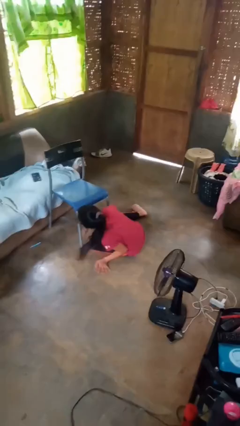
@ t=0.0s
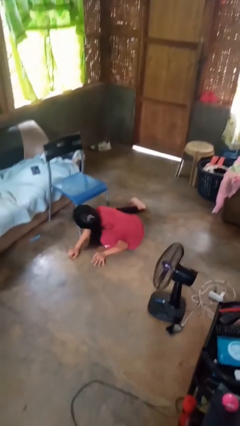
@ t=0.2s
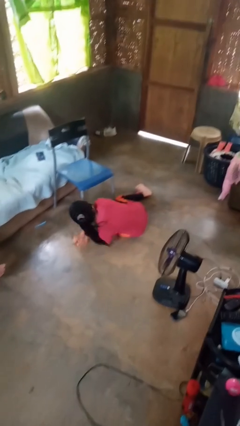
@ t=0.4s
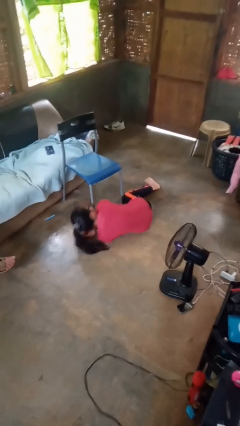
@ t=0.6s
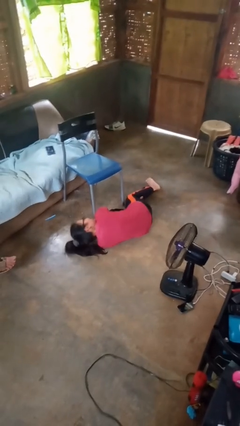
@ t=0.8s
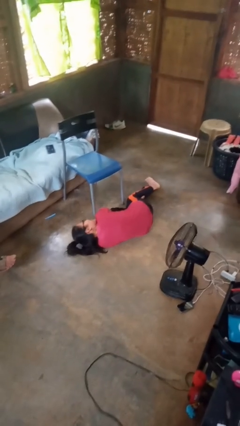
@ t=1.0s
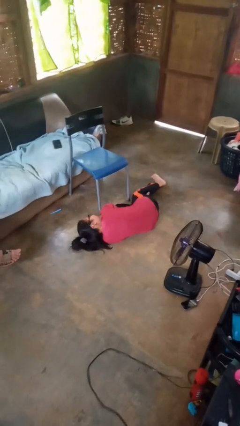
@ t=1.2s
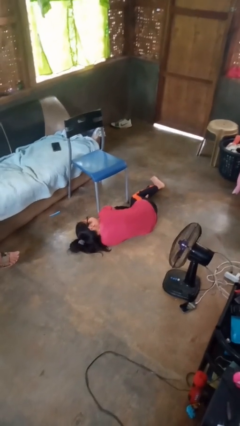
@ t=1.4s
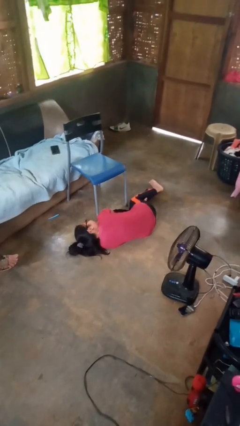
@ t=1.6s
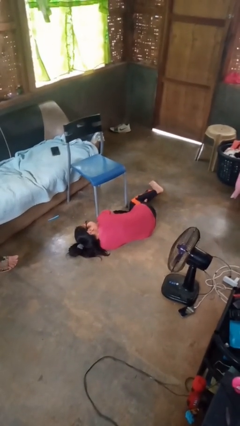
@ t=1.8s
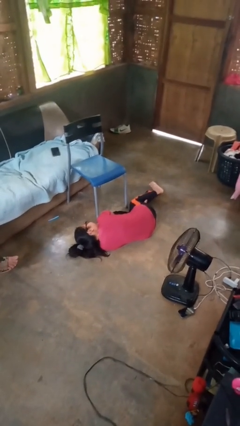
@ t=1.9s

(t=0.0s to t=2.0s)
person lies down on floor

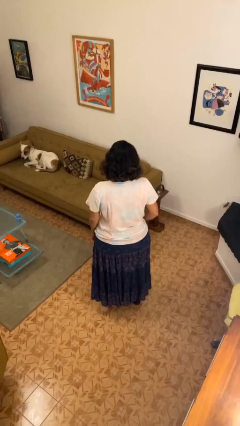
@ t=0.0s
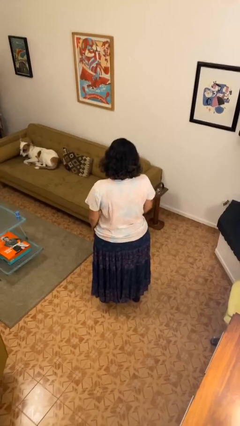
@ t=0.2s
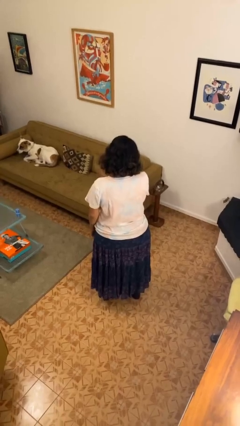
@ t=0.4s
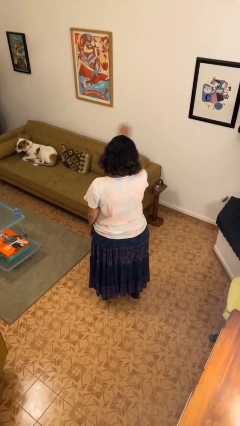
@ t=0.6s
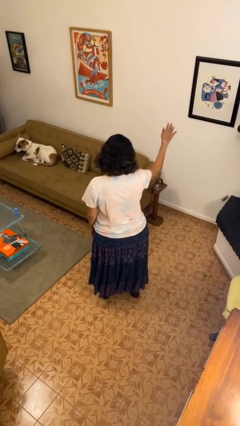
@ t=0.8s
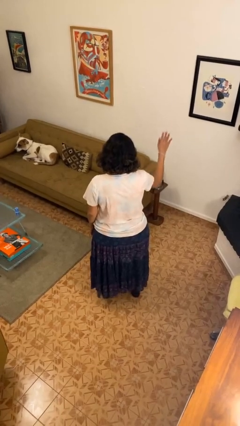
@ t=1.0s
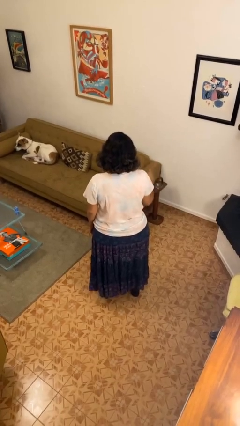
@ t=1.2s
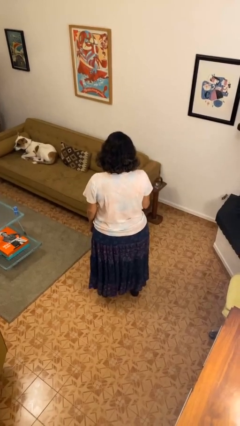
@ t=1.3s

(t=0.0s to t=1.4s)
person gestures swipe right

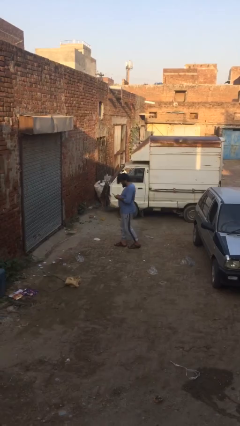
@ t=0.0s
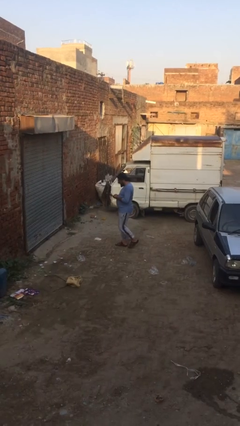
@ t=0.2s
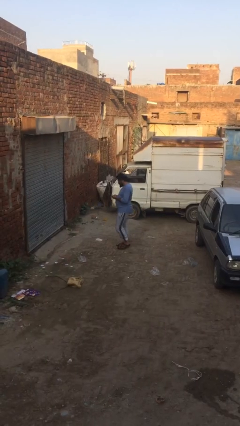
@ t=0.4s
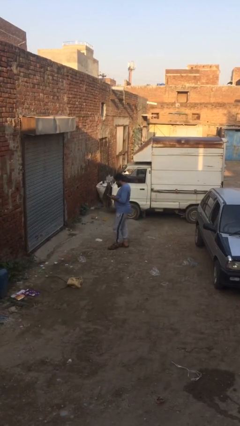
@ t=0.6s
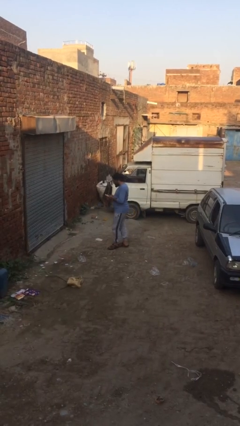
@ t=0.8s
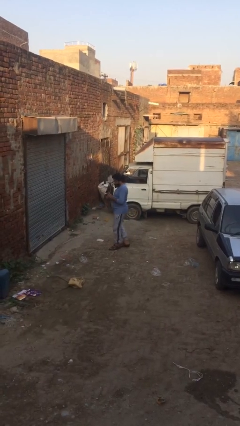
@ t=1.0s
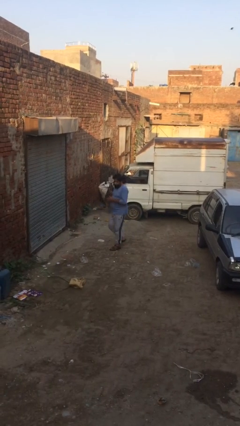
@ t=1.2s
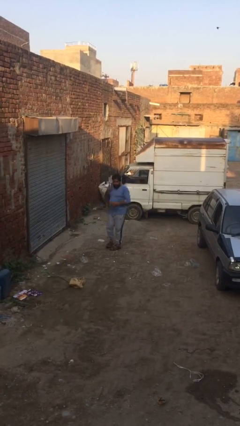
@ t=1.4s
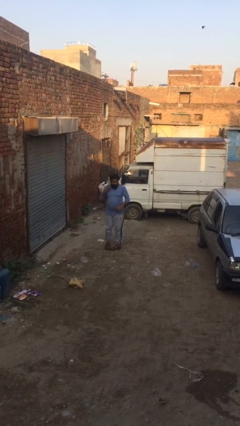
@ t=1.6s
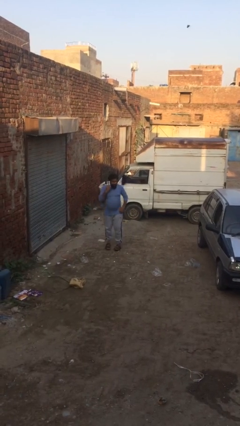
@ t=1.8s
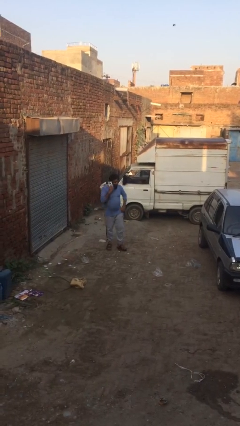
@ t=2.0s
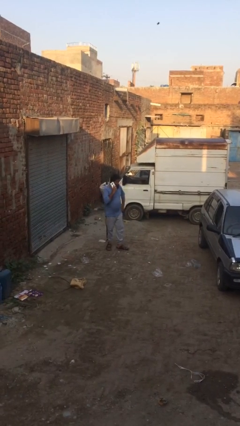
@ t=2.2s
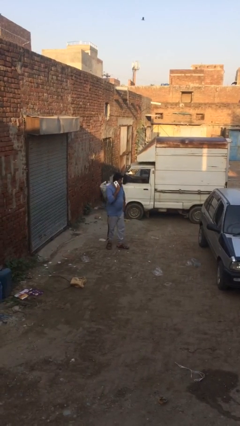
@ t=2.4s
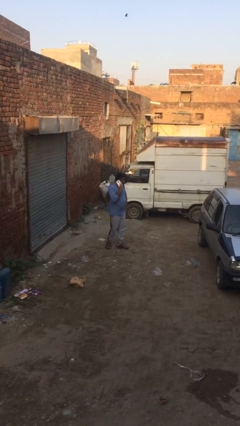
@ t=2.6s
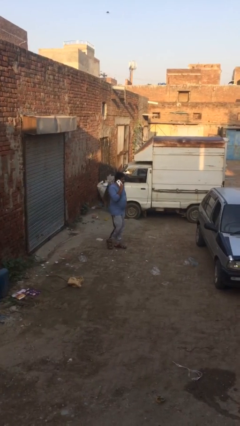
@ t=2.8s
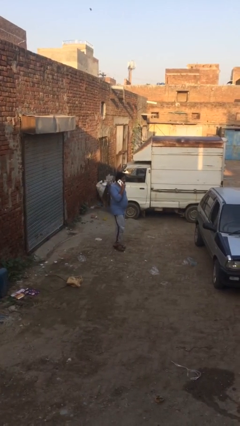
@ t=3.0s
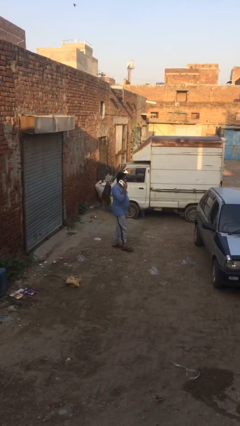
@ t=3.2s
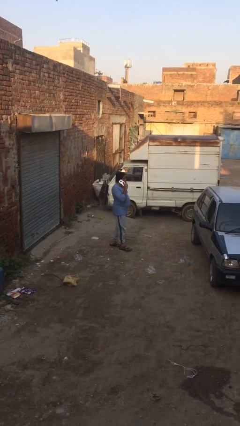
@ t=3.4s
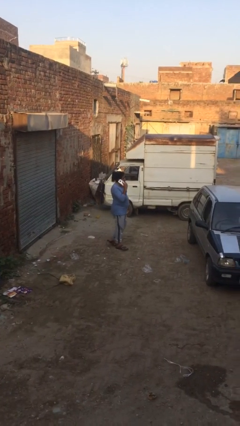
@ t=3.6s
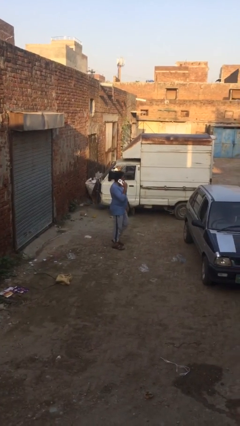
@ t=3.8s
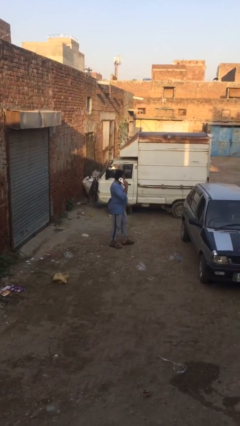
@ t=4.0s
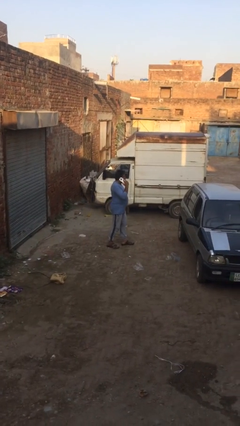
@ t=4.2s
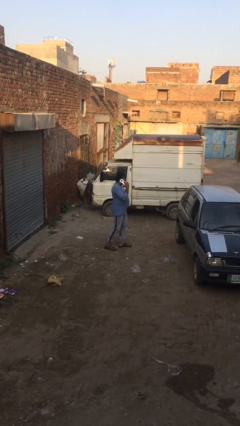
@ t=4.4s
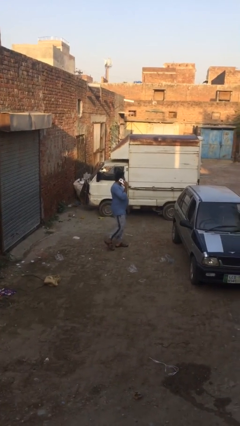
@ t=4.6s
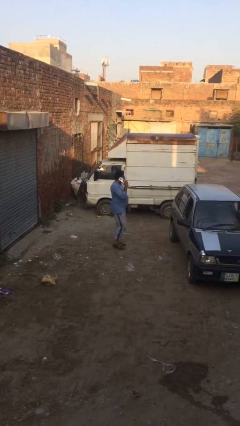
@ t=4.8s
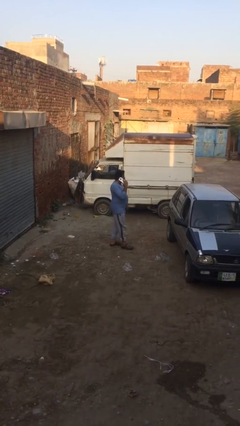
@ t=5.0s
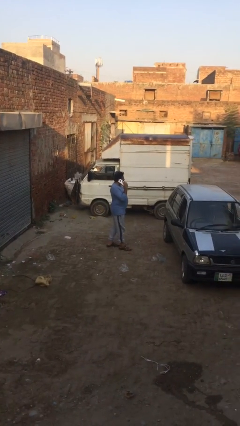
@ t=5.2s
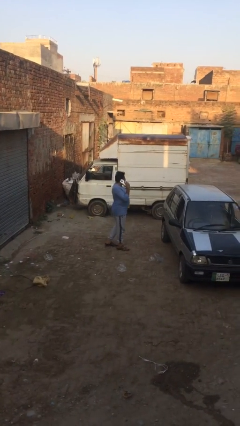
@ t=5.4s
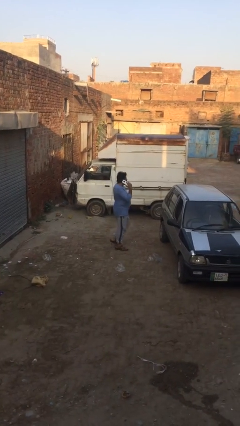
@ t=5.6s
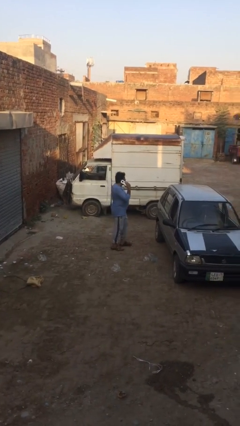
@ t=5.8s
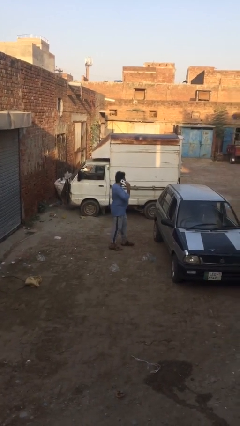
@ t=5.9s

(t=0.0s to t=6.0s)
person talks on phone

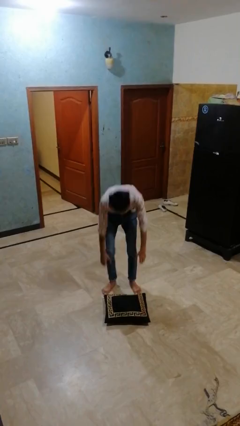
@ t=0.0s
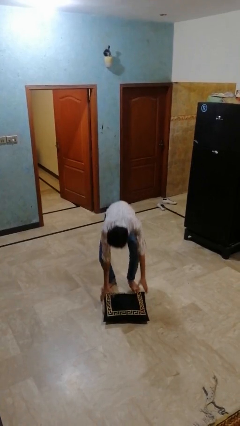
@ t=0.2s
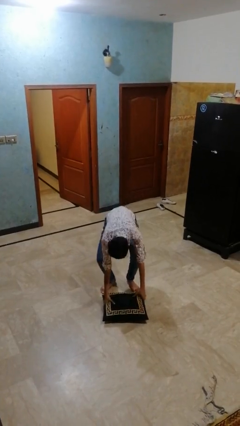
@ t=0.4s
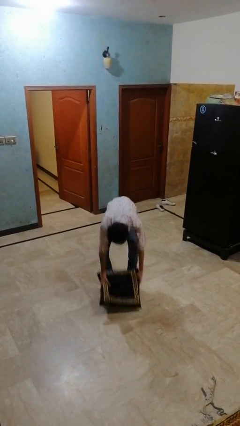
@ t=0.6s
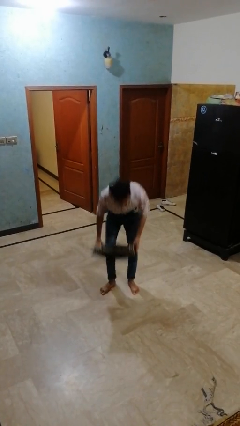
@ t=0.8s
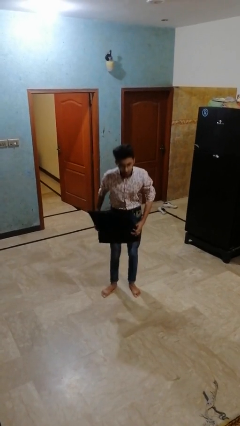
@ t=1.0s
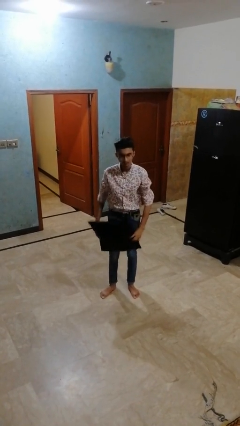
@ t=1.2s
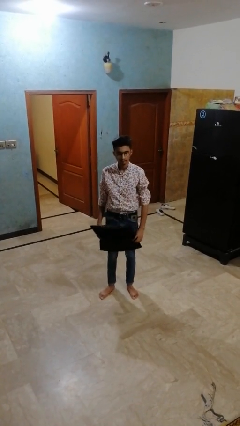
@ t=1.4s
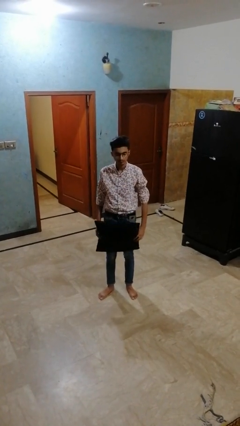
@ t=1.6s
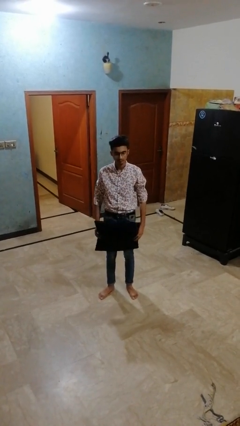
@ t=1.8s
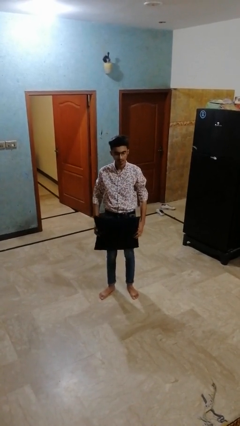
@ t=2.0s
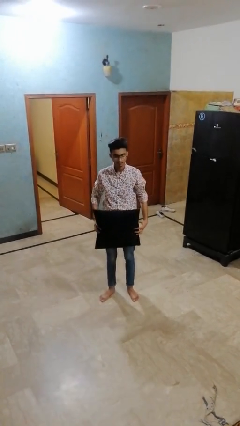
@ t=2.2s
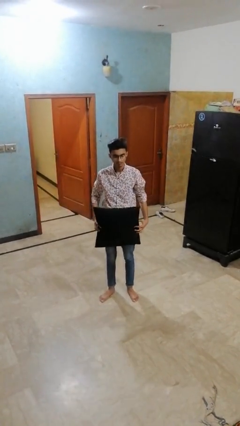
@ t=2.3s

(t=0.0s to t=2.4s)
person picks up object from floor

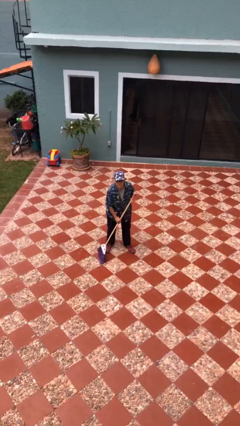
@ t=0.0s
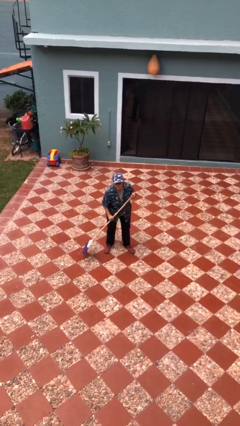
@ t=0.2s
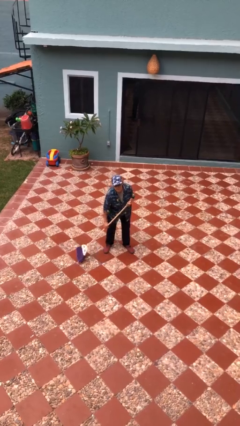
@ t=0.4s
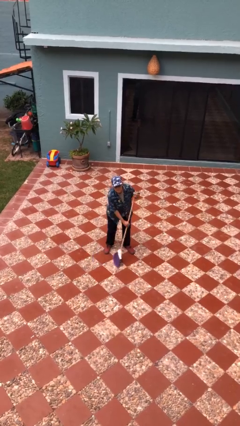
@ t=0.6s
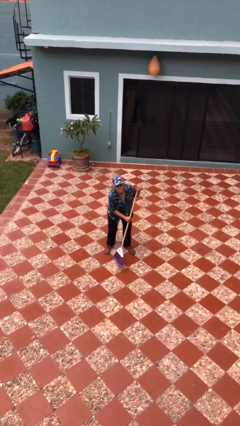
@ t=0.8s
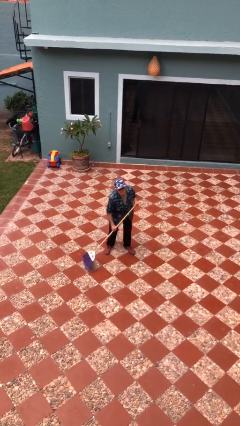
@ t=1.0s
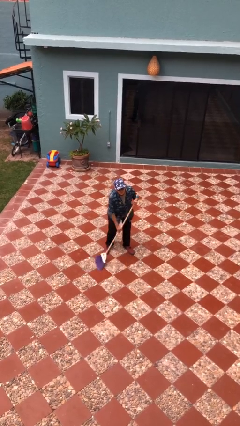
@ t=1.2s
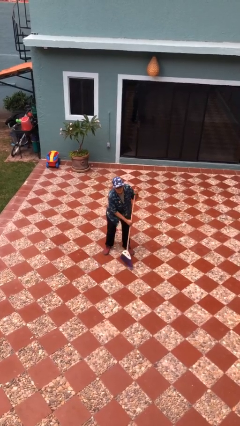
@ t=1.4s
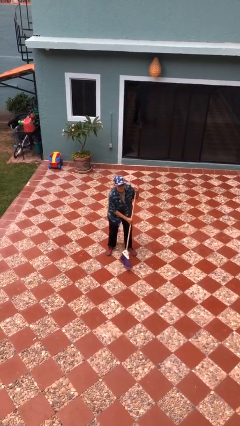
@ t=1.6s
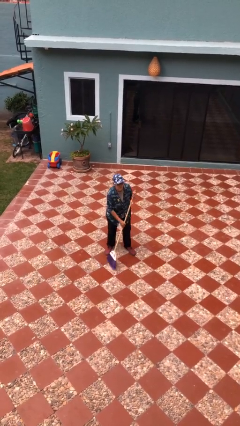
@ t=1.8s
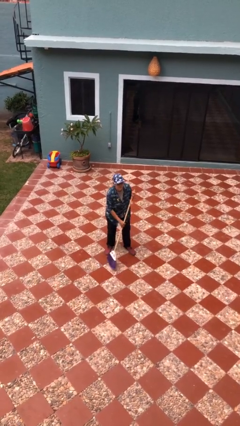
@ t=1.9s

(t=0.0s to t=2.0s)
person sweeps floor

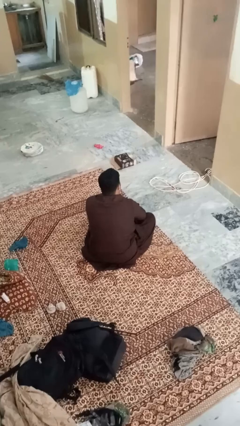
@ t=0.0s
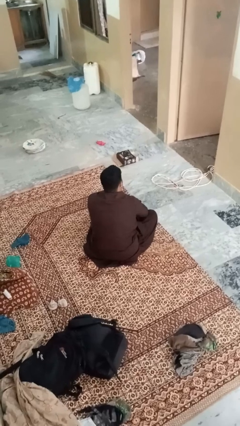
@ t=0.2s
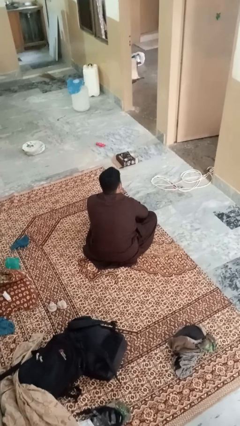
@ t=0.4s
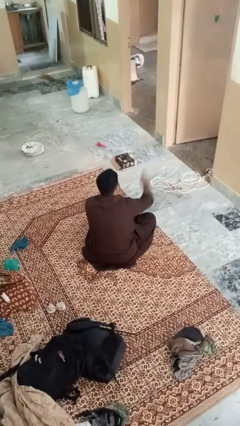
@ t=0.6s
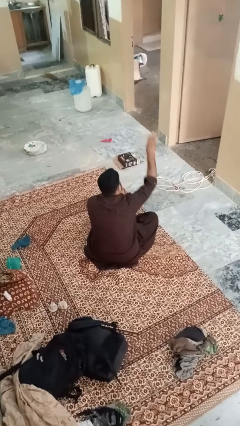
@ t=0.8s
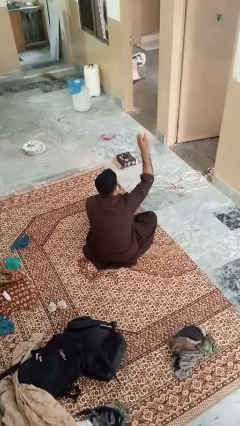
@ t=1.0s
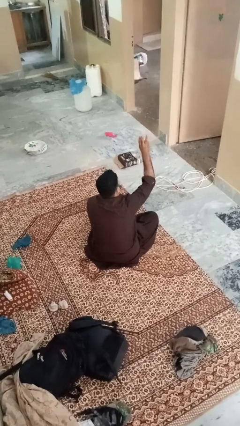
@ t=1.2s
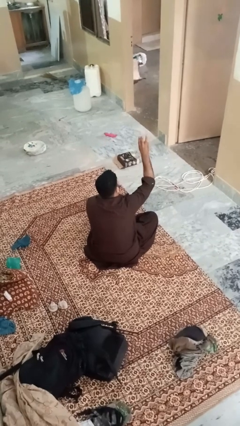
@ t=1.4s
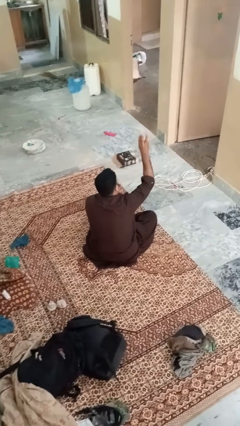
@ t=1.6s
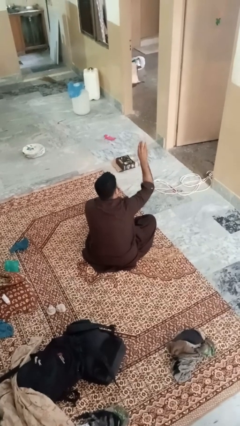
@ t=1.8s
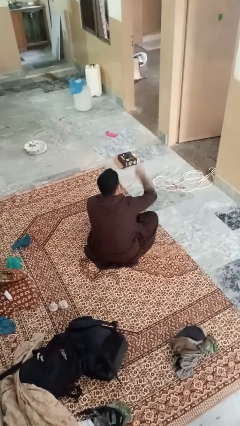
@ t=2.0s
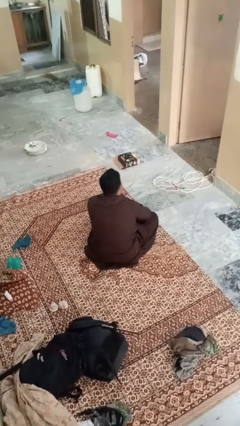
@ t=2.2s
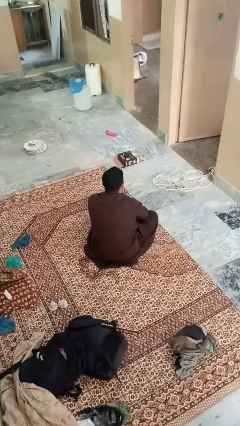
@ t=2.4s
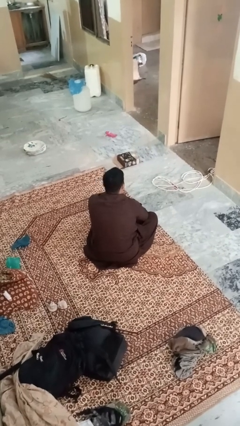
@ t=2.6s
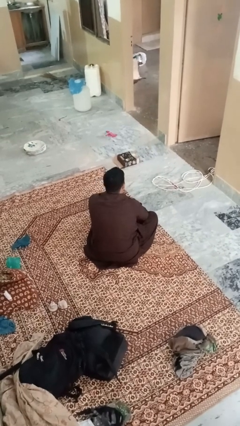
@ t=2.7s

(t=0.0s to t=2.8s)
person gestures number three

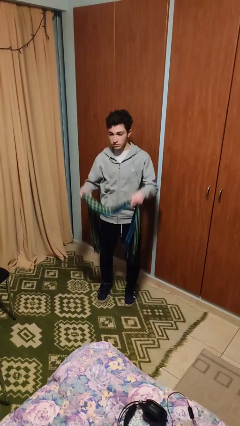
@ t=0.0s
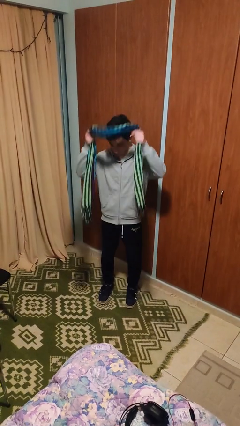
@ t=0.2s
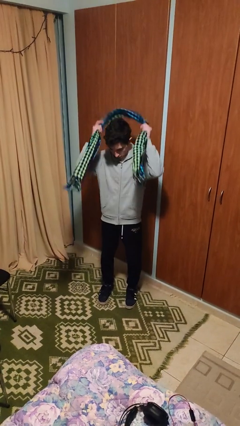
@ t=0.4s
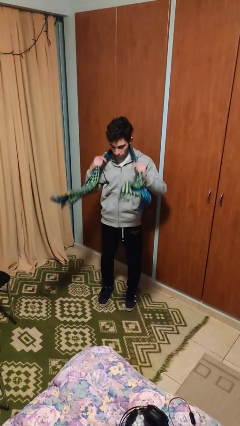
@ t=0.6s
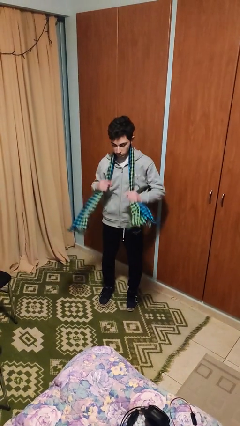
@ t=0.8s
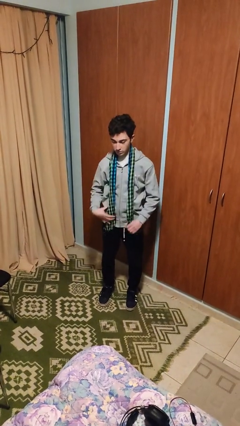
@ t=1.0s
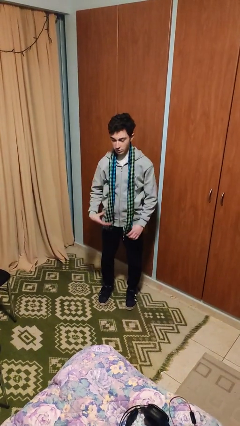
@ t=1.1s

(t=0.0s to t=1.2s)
person puts on scarf
